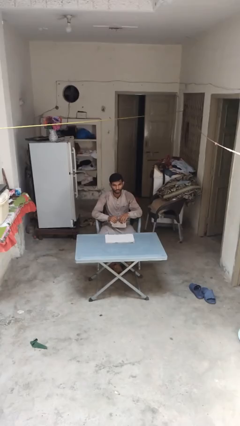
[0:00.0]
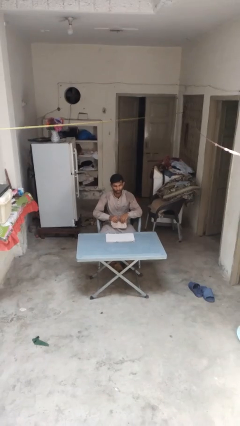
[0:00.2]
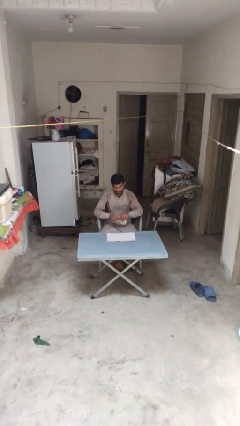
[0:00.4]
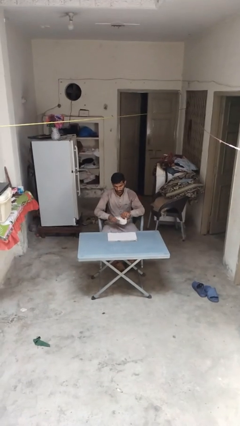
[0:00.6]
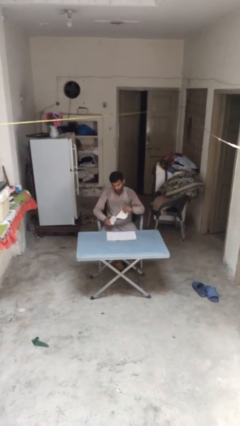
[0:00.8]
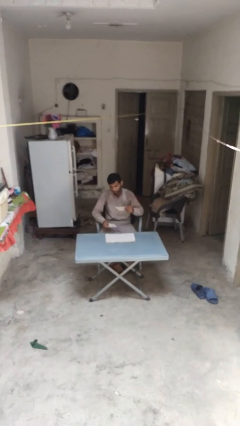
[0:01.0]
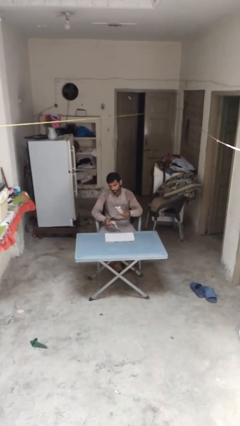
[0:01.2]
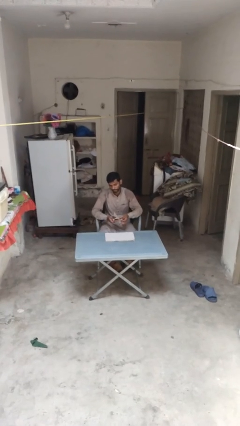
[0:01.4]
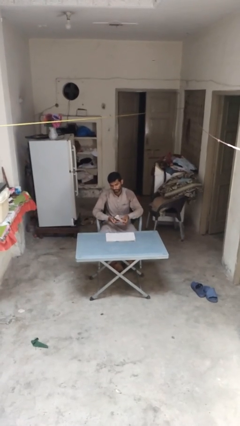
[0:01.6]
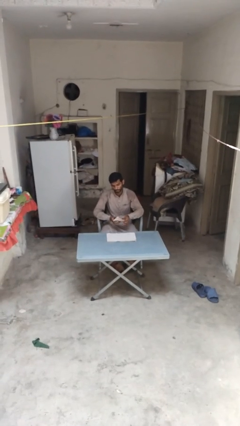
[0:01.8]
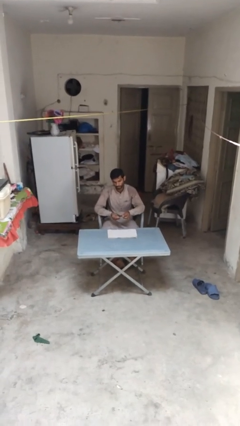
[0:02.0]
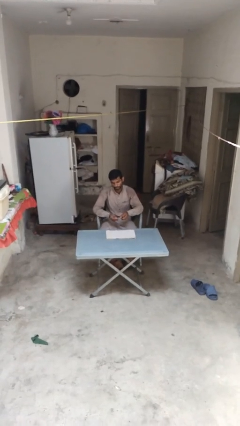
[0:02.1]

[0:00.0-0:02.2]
person tears paper

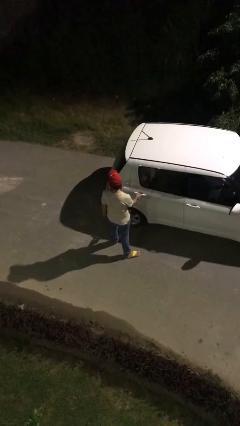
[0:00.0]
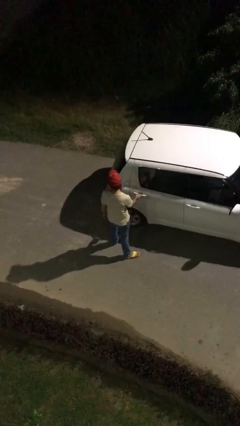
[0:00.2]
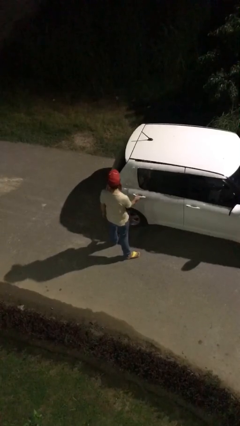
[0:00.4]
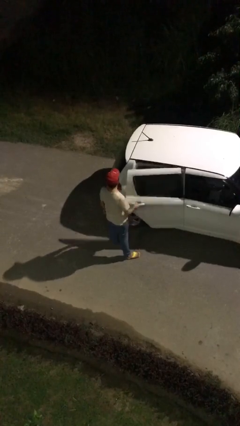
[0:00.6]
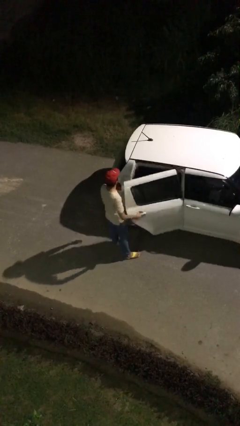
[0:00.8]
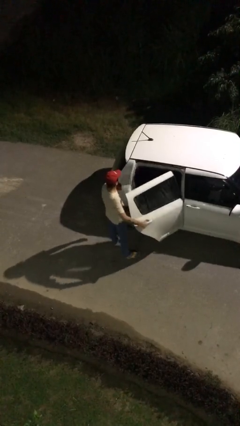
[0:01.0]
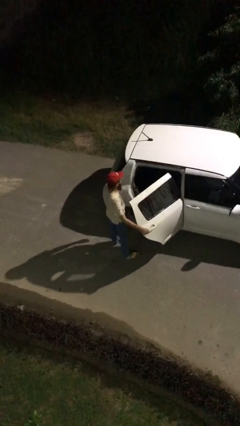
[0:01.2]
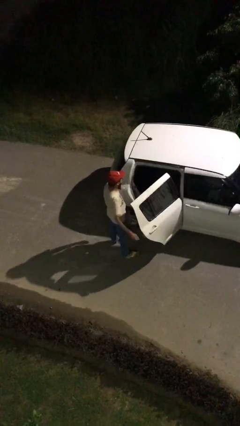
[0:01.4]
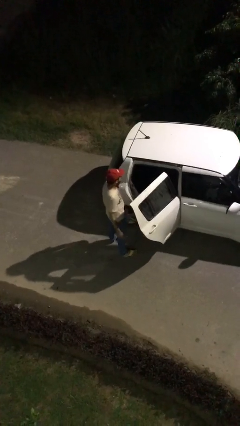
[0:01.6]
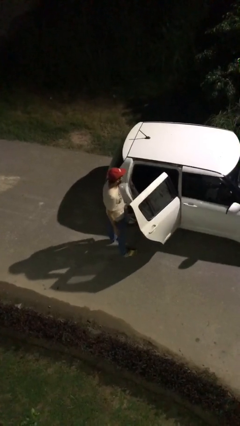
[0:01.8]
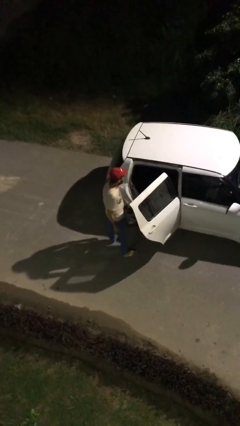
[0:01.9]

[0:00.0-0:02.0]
person opens car door

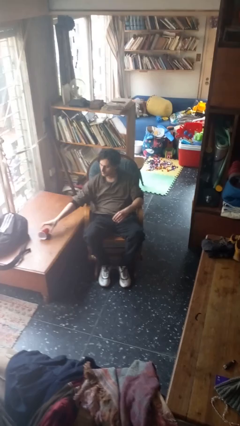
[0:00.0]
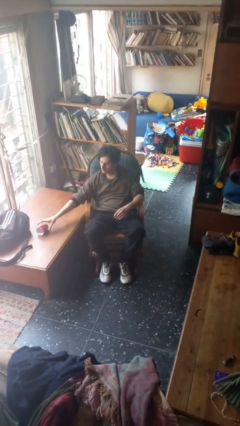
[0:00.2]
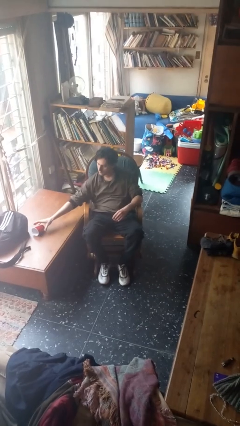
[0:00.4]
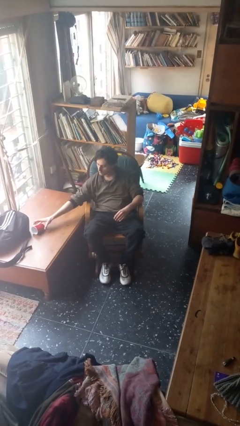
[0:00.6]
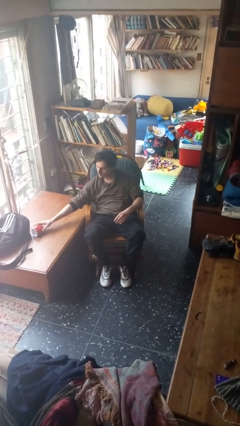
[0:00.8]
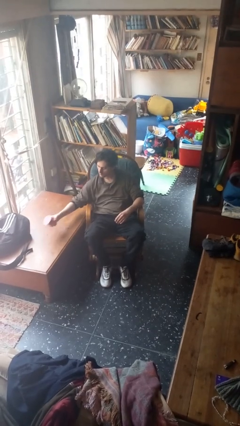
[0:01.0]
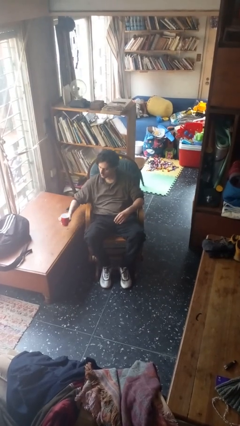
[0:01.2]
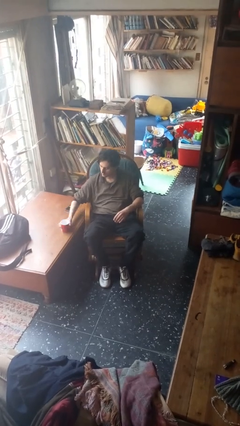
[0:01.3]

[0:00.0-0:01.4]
person sets upright glass

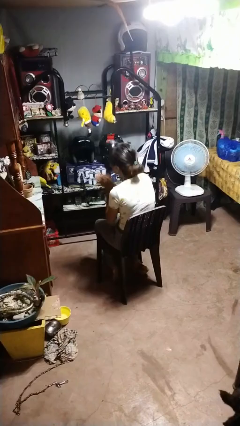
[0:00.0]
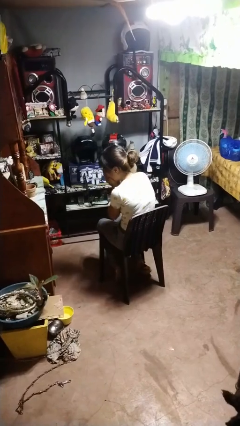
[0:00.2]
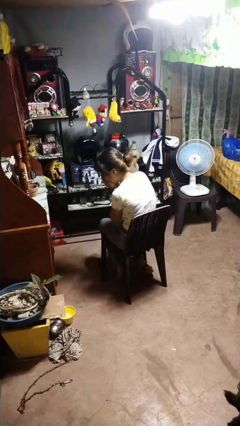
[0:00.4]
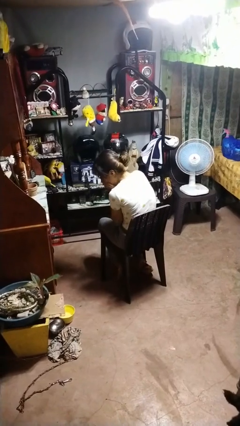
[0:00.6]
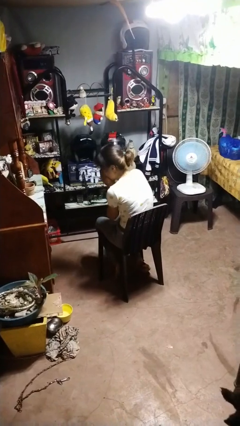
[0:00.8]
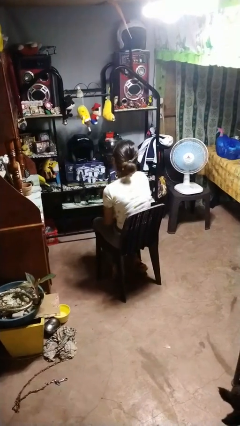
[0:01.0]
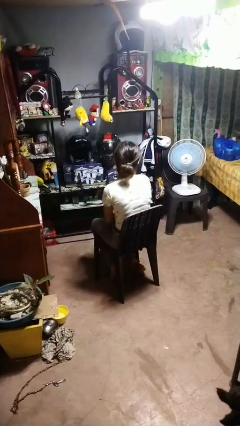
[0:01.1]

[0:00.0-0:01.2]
person sneezes into hand

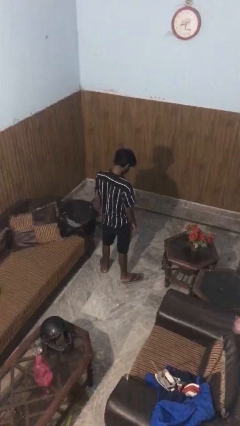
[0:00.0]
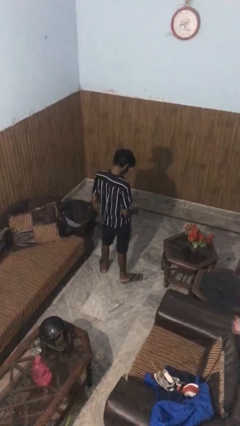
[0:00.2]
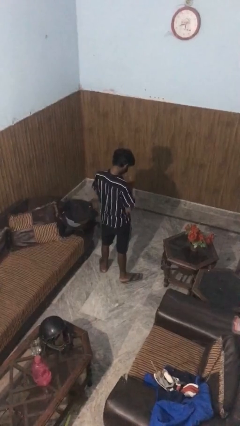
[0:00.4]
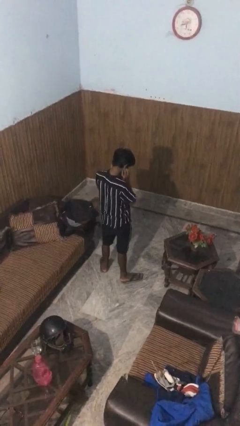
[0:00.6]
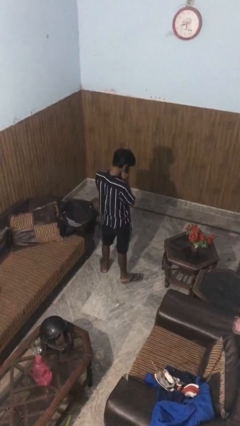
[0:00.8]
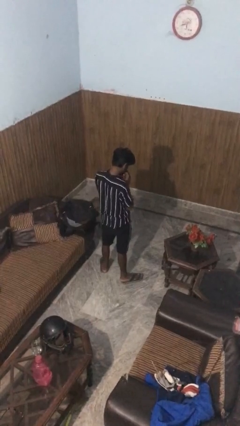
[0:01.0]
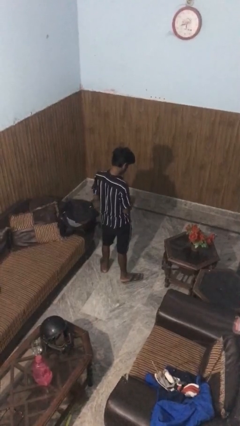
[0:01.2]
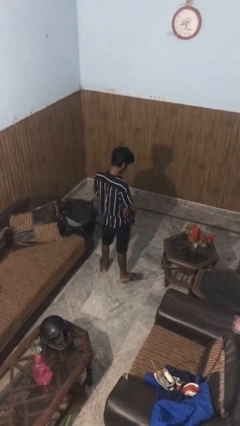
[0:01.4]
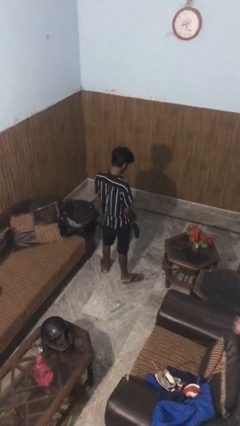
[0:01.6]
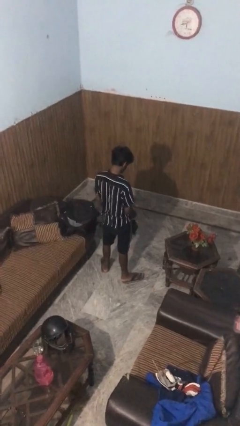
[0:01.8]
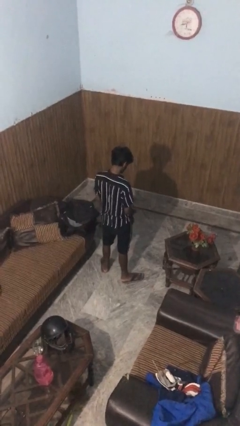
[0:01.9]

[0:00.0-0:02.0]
person takes off facemask

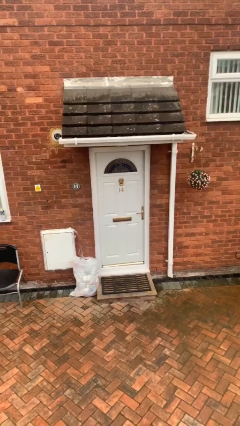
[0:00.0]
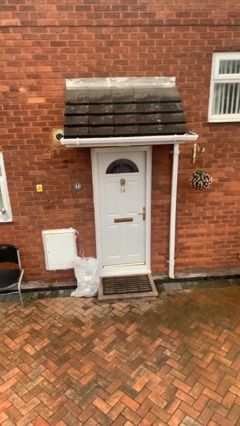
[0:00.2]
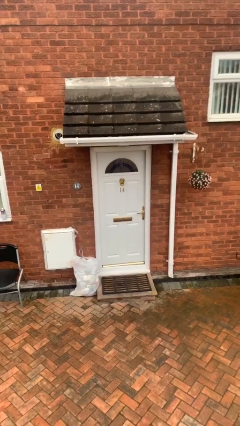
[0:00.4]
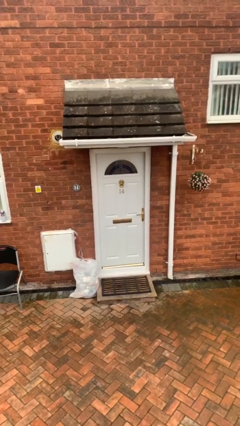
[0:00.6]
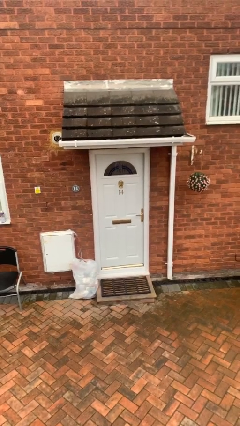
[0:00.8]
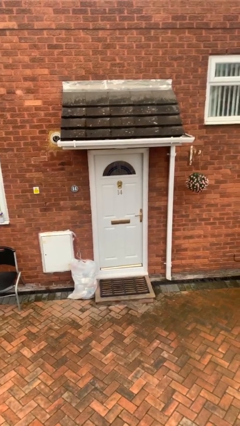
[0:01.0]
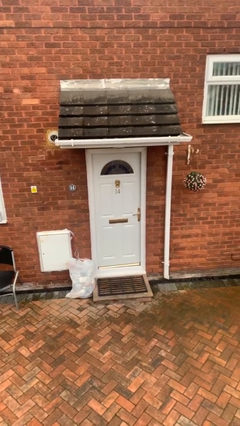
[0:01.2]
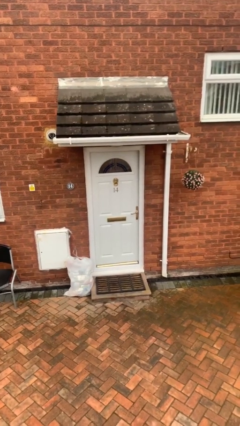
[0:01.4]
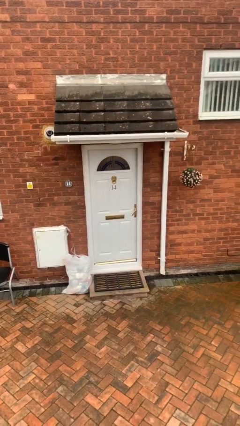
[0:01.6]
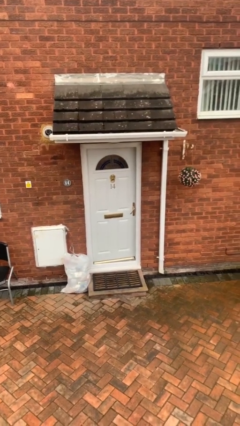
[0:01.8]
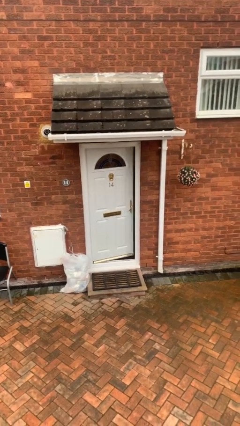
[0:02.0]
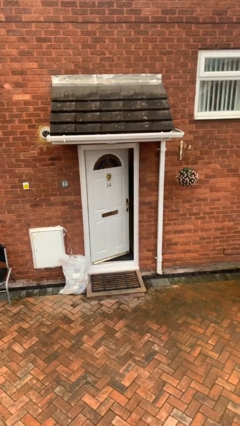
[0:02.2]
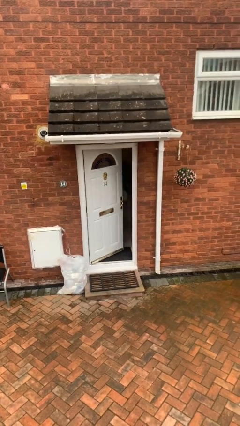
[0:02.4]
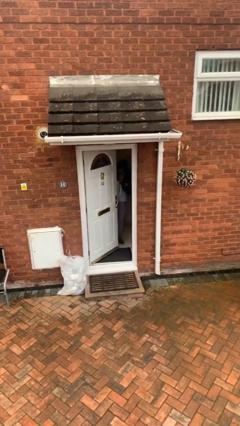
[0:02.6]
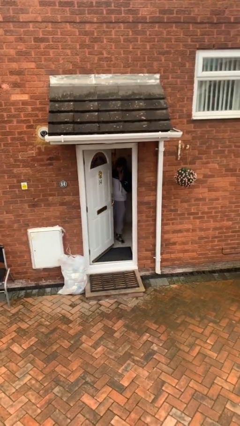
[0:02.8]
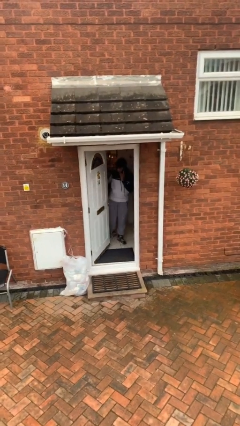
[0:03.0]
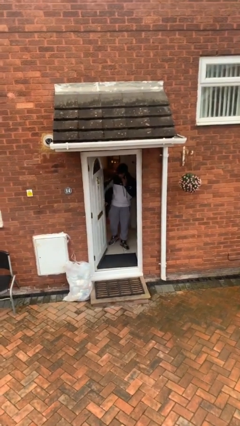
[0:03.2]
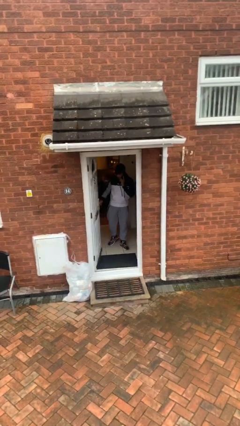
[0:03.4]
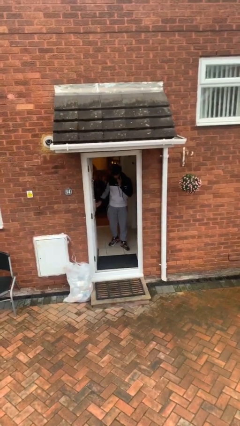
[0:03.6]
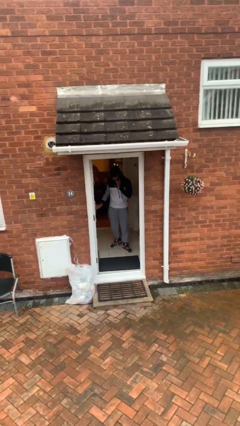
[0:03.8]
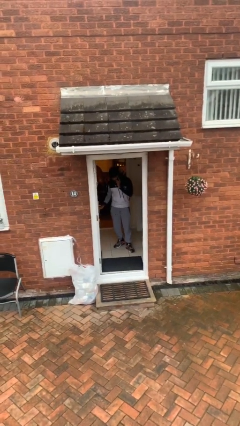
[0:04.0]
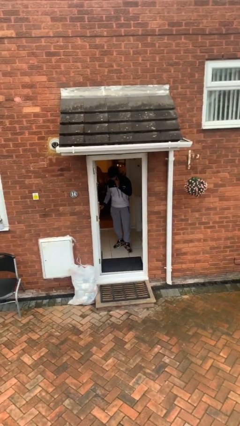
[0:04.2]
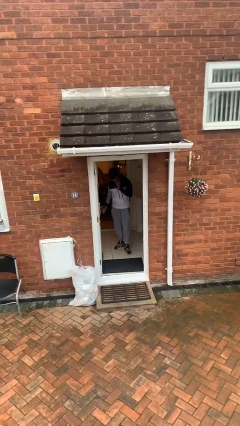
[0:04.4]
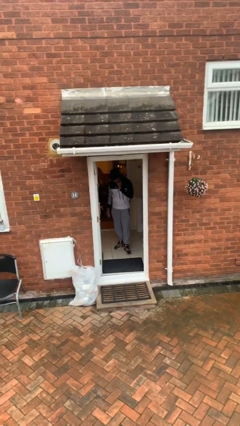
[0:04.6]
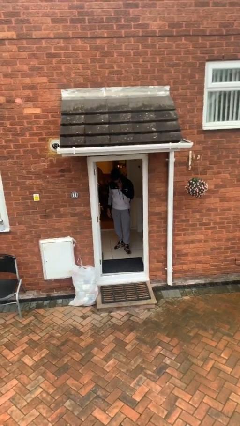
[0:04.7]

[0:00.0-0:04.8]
person opens facility door

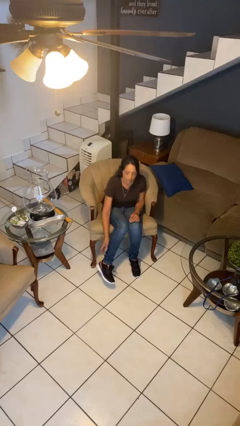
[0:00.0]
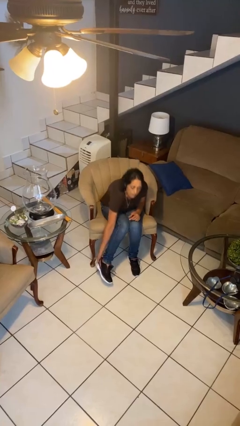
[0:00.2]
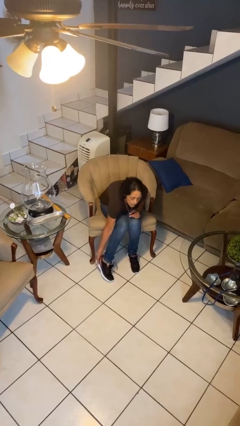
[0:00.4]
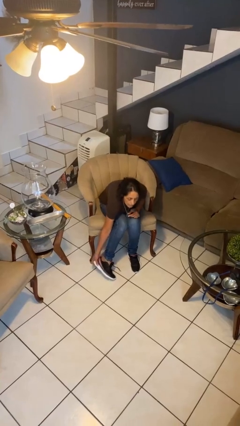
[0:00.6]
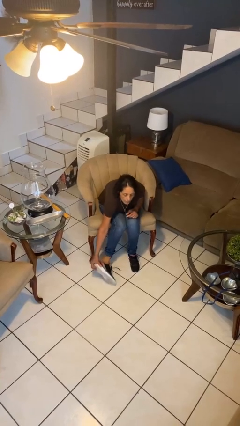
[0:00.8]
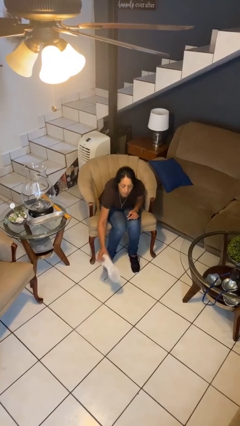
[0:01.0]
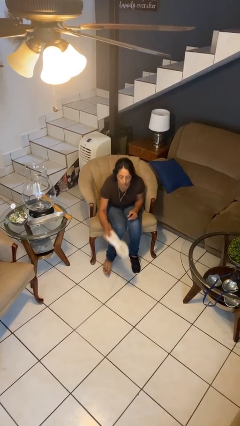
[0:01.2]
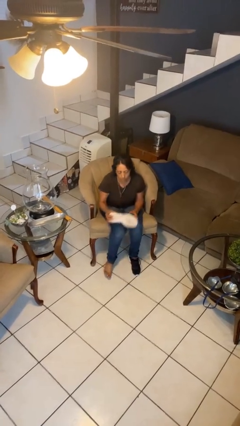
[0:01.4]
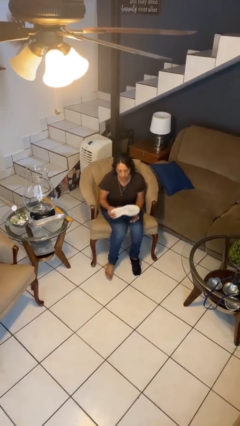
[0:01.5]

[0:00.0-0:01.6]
person takes off shoes

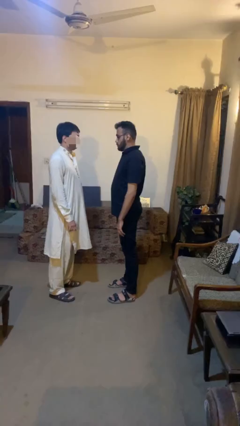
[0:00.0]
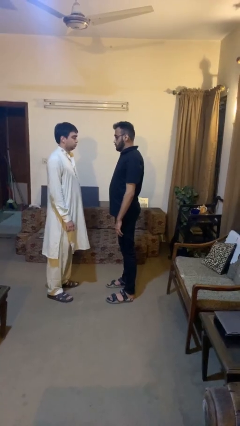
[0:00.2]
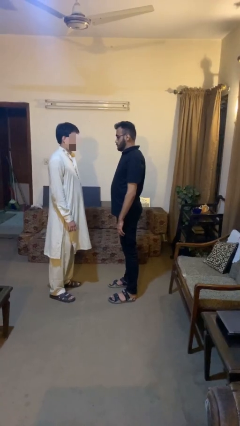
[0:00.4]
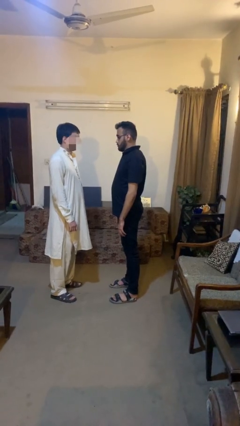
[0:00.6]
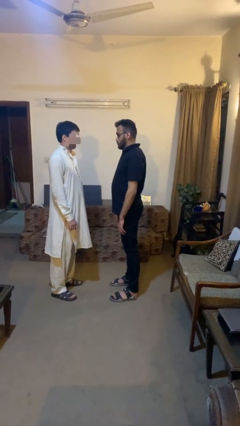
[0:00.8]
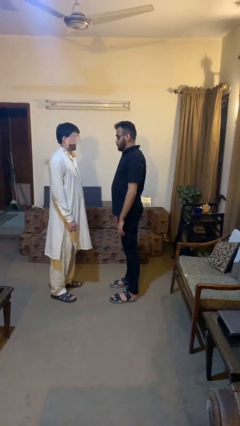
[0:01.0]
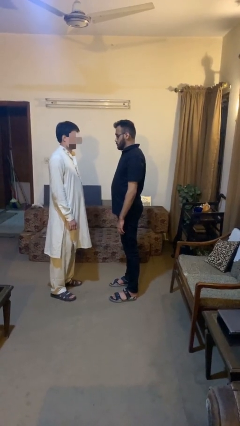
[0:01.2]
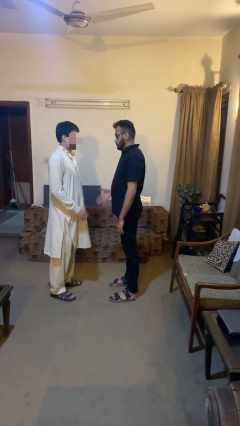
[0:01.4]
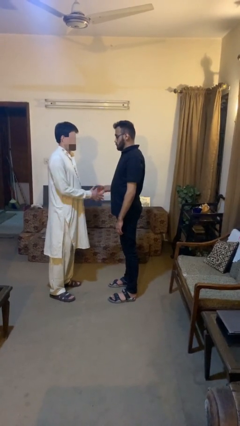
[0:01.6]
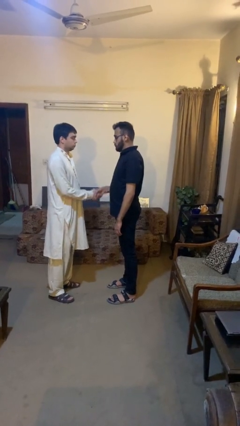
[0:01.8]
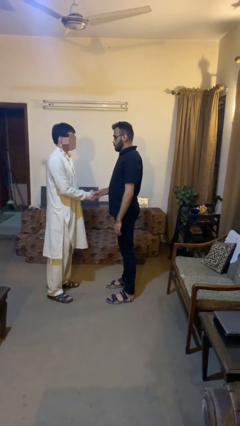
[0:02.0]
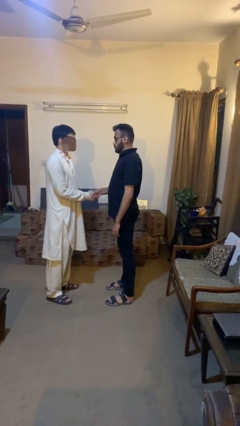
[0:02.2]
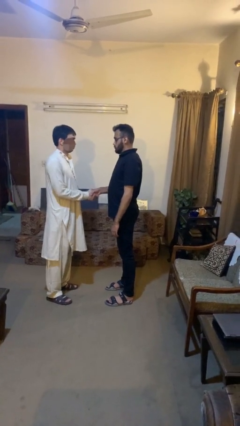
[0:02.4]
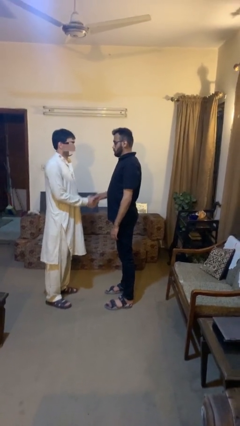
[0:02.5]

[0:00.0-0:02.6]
person highfives hand
